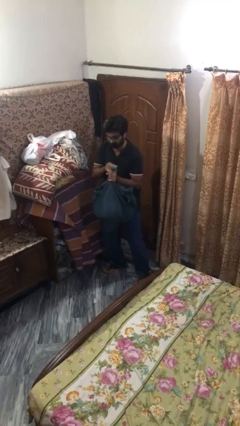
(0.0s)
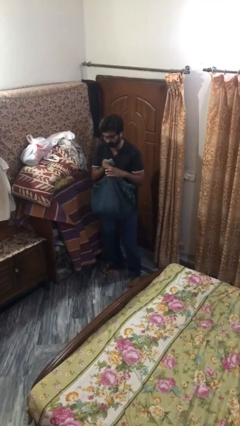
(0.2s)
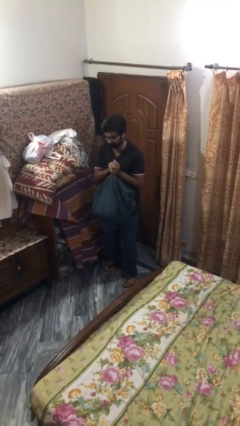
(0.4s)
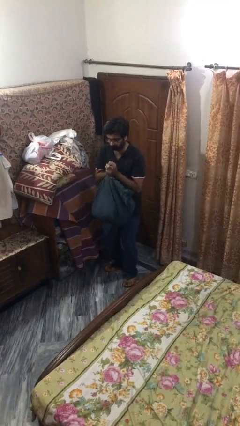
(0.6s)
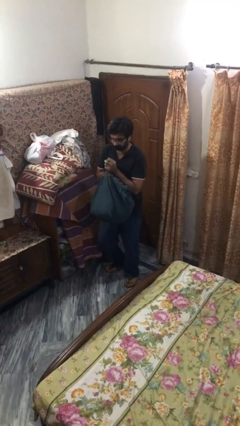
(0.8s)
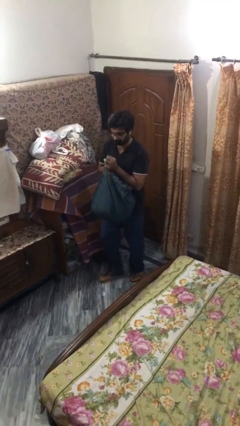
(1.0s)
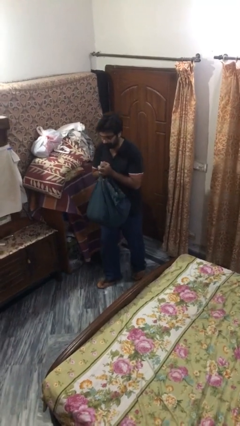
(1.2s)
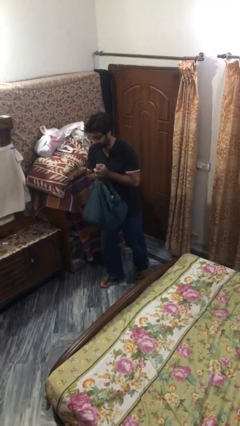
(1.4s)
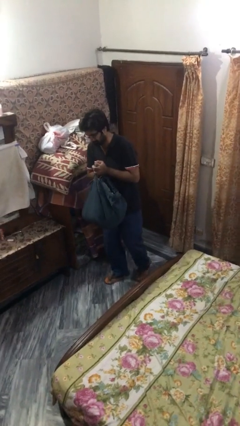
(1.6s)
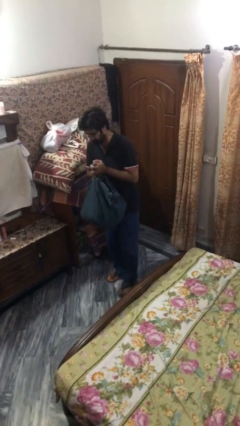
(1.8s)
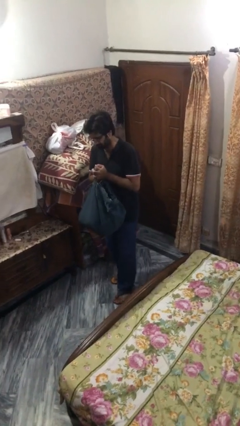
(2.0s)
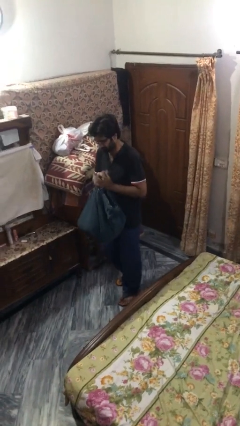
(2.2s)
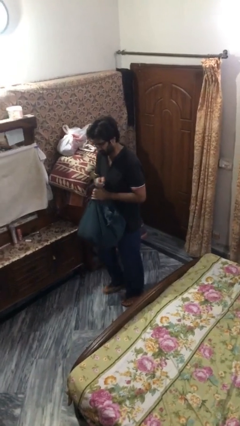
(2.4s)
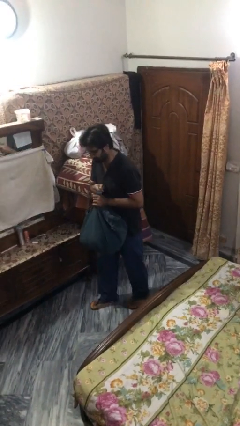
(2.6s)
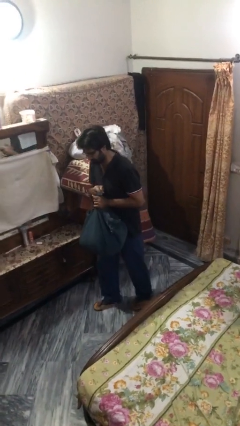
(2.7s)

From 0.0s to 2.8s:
person carries heavy object

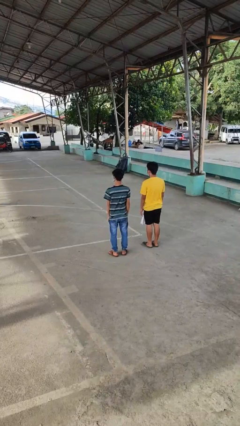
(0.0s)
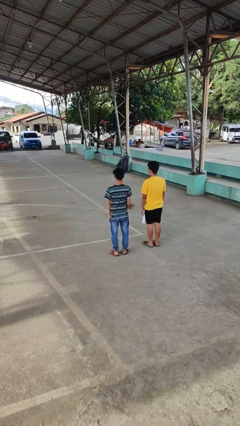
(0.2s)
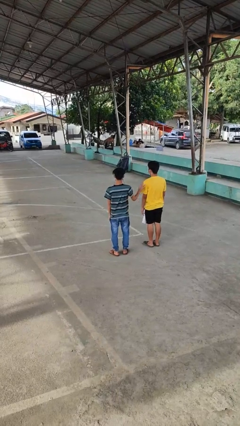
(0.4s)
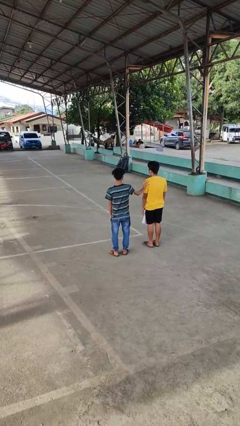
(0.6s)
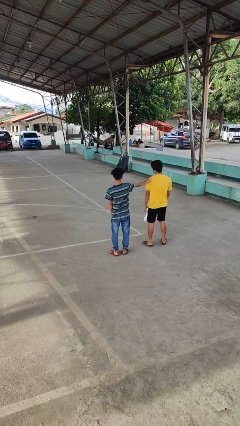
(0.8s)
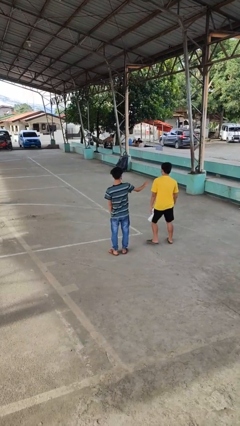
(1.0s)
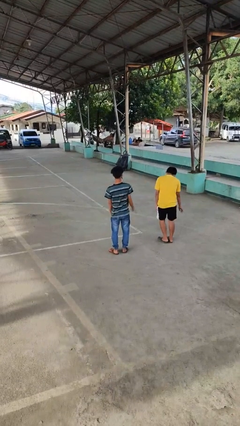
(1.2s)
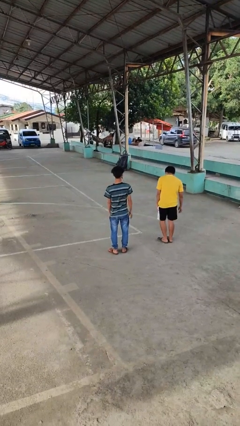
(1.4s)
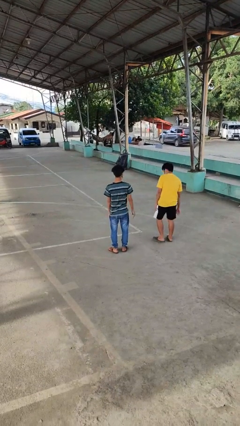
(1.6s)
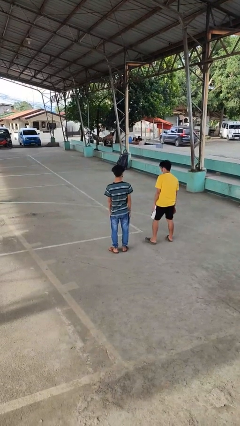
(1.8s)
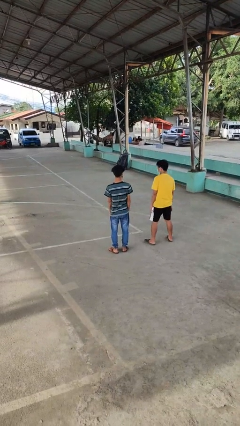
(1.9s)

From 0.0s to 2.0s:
person shoves person

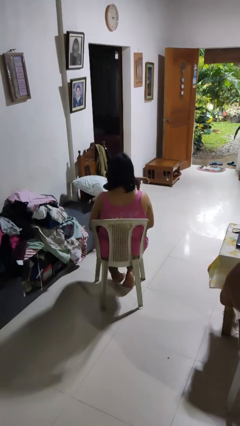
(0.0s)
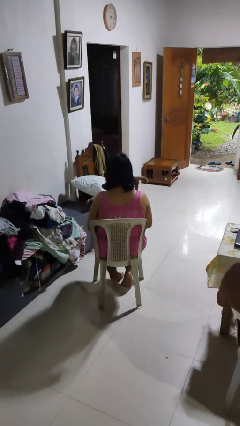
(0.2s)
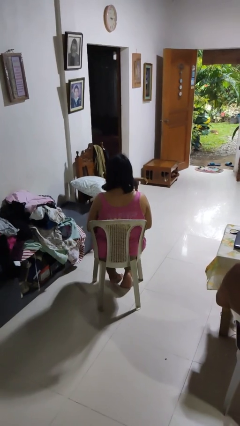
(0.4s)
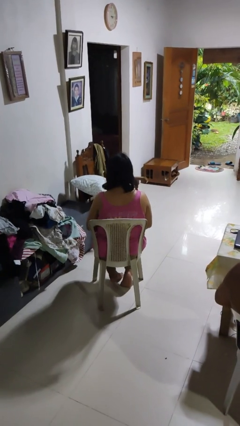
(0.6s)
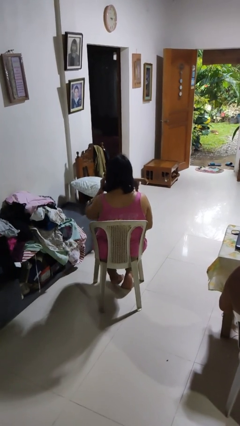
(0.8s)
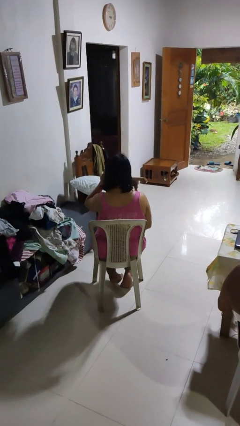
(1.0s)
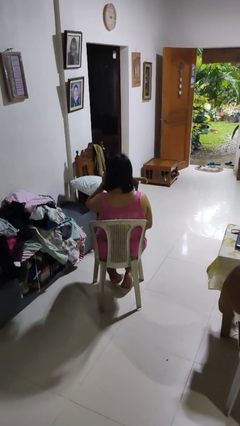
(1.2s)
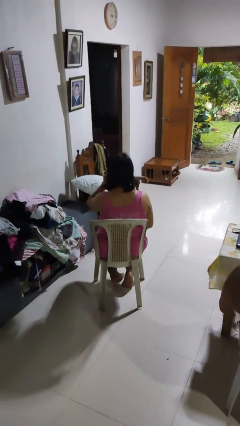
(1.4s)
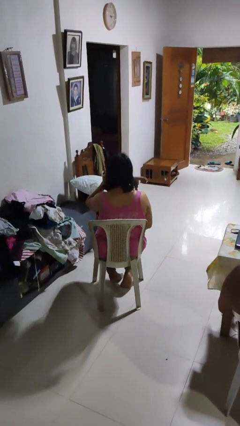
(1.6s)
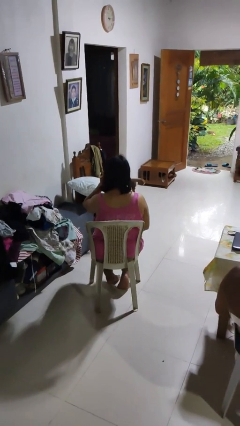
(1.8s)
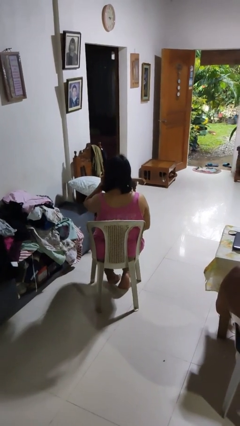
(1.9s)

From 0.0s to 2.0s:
person touches earlobe

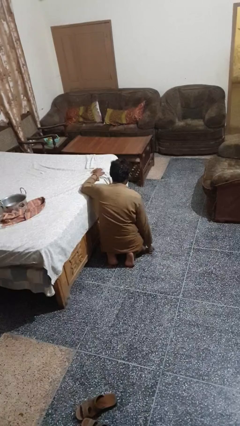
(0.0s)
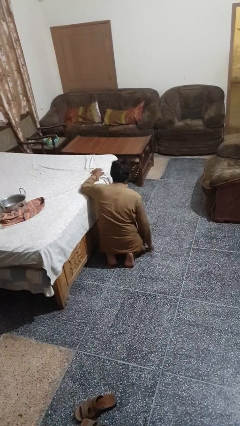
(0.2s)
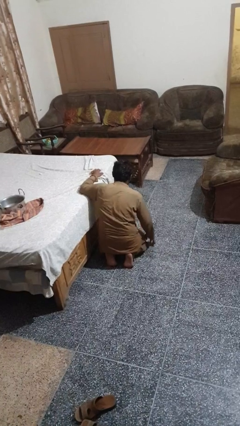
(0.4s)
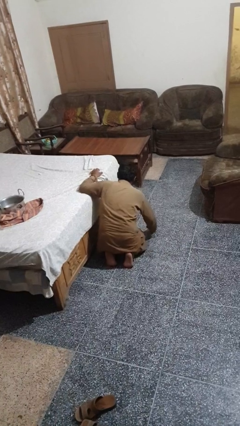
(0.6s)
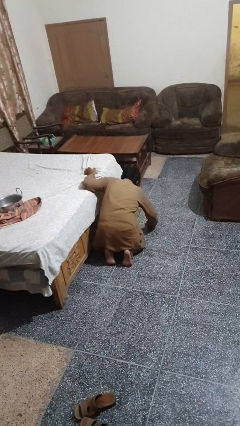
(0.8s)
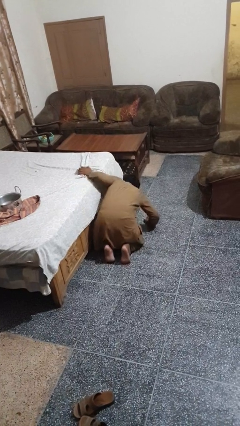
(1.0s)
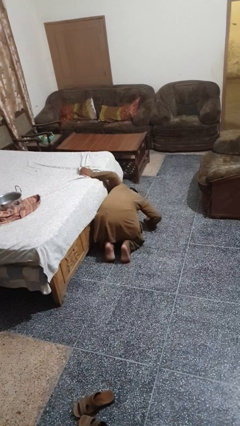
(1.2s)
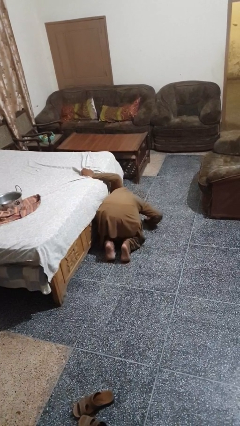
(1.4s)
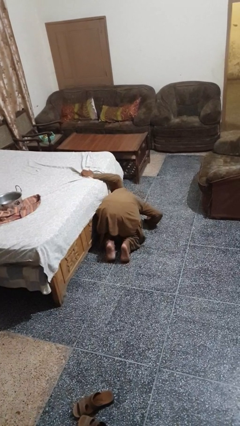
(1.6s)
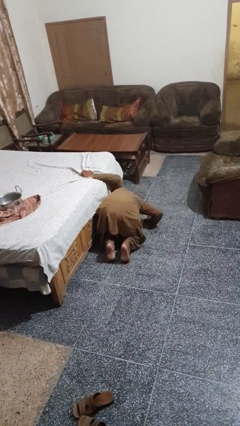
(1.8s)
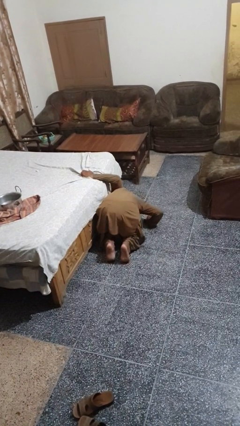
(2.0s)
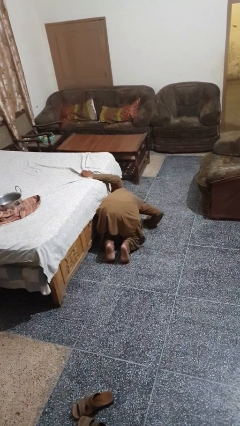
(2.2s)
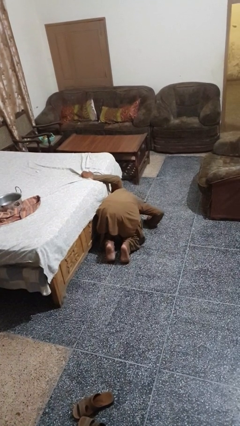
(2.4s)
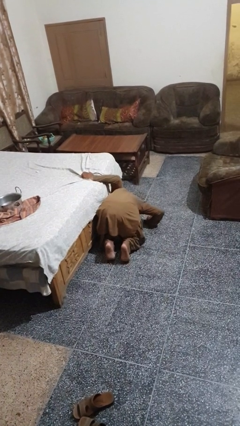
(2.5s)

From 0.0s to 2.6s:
person searches under bed

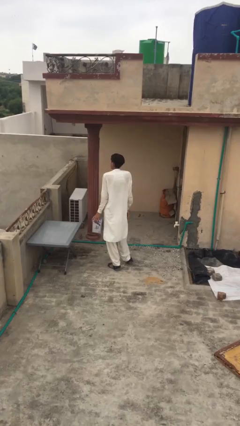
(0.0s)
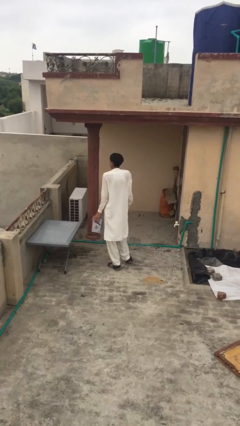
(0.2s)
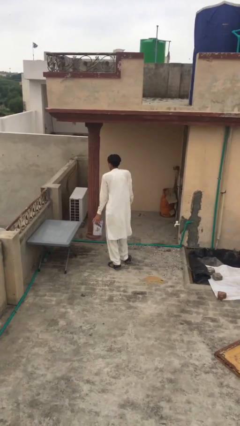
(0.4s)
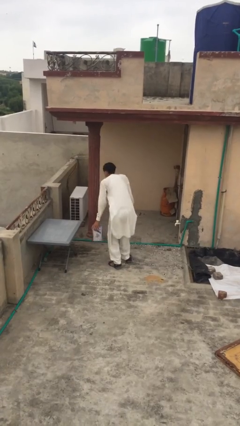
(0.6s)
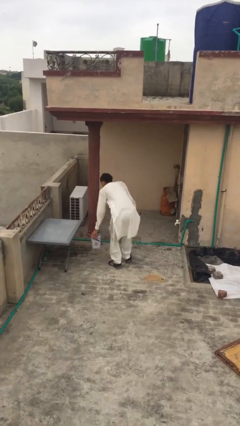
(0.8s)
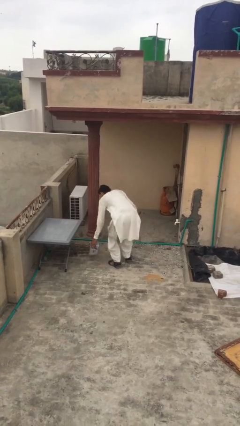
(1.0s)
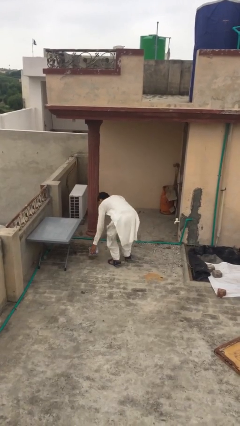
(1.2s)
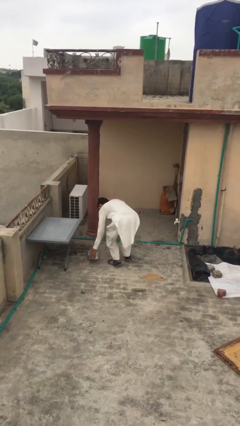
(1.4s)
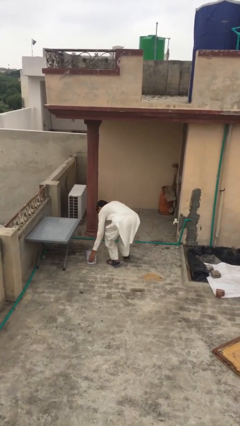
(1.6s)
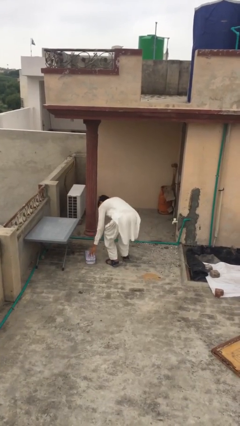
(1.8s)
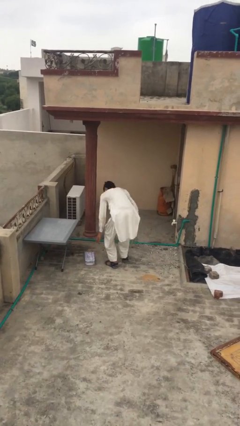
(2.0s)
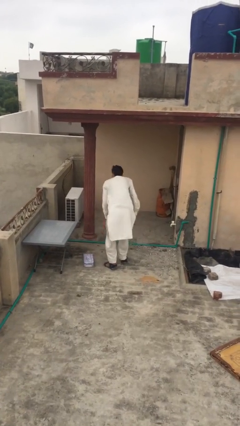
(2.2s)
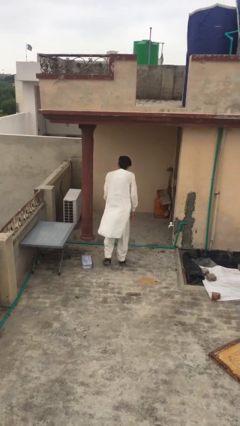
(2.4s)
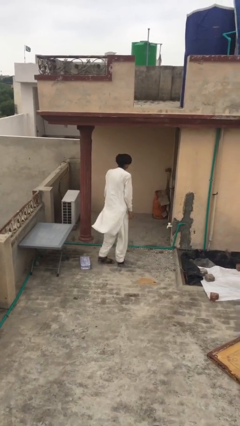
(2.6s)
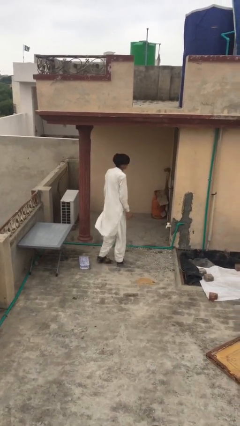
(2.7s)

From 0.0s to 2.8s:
person puts down object on floor

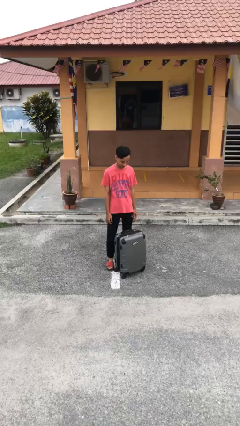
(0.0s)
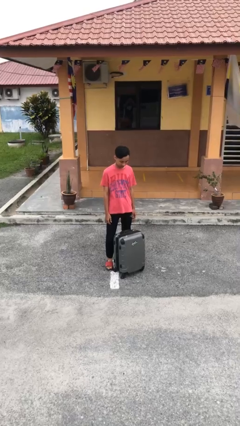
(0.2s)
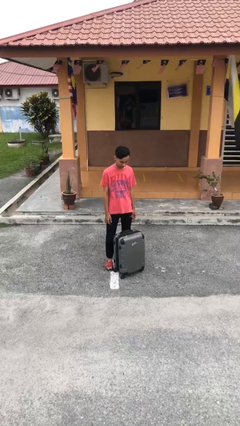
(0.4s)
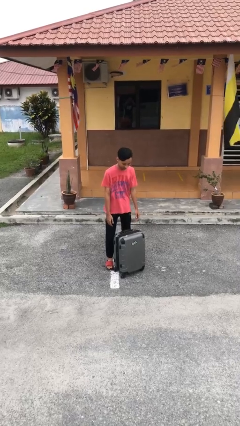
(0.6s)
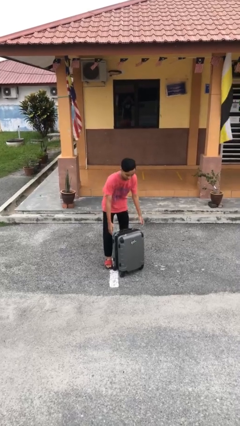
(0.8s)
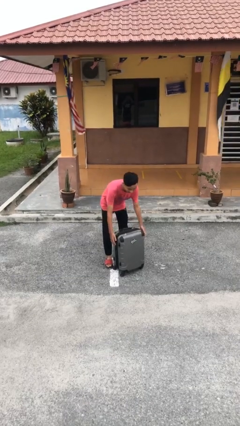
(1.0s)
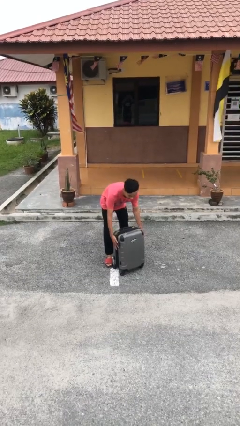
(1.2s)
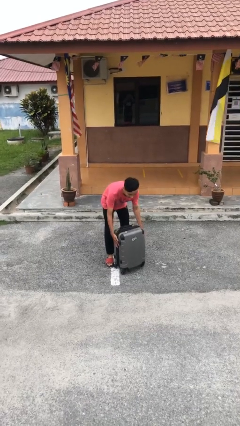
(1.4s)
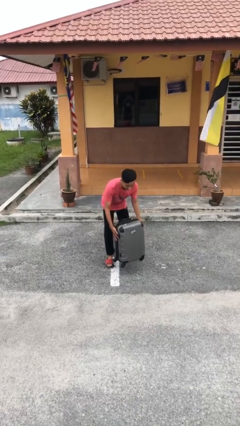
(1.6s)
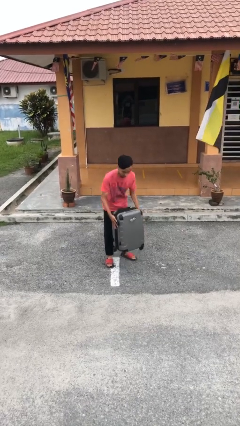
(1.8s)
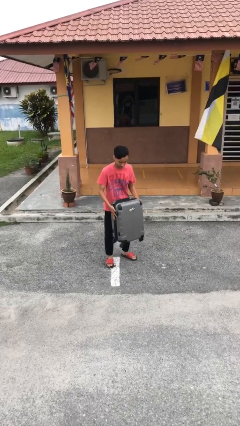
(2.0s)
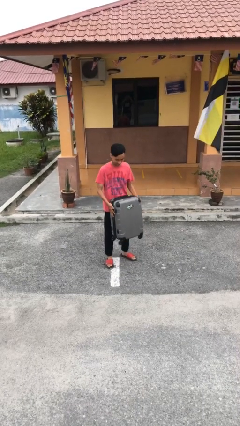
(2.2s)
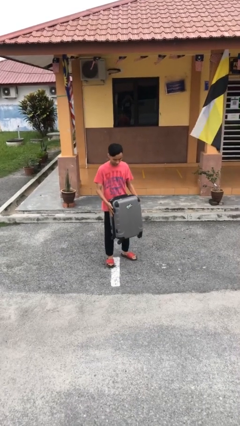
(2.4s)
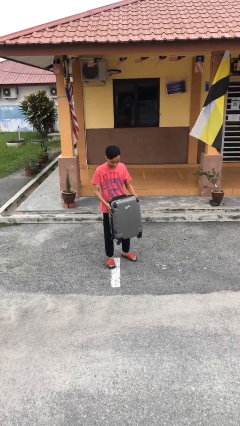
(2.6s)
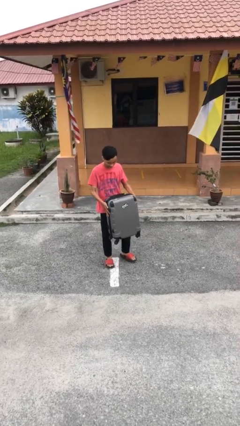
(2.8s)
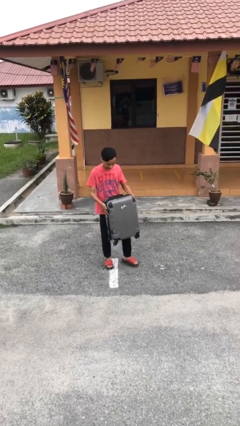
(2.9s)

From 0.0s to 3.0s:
person picks up object from floor

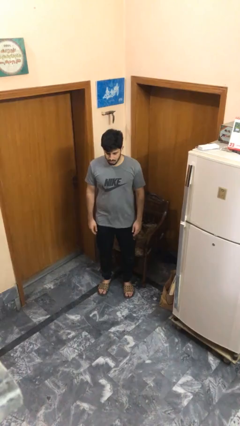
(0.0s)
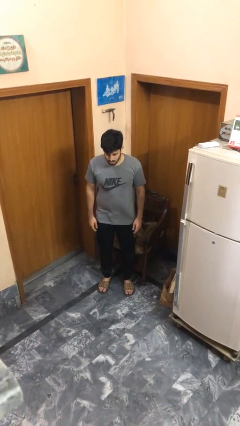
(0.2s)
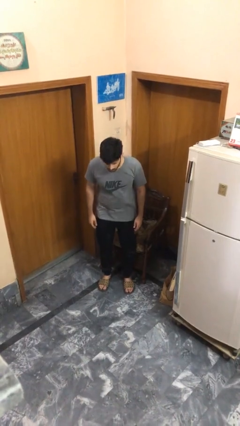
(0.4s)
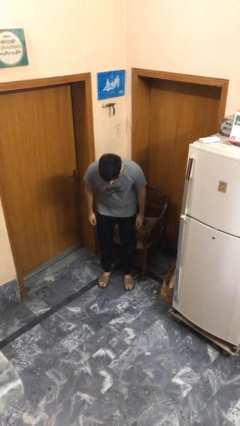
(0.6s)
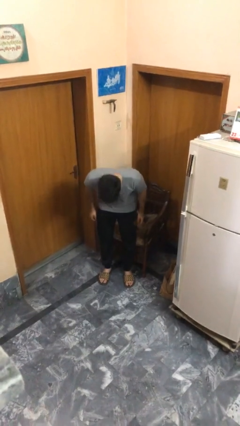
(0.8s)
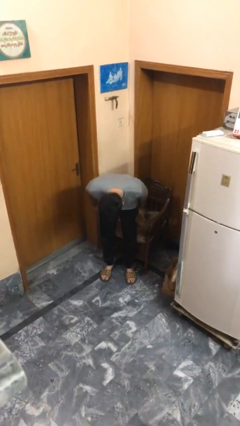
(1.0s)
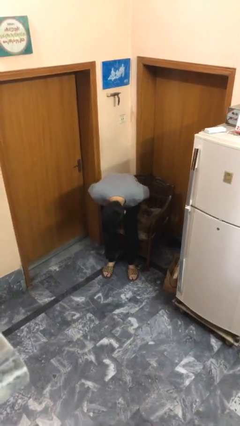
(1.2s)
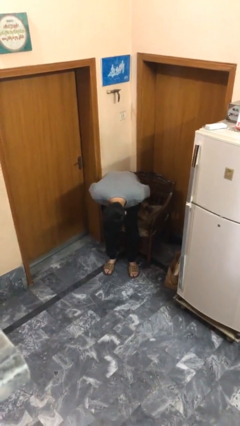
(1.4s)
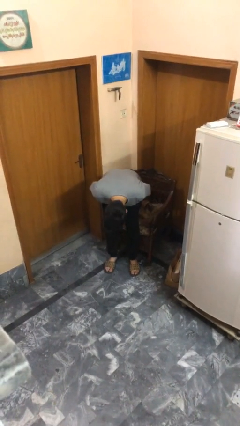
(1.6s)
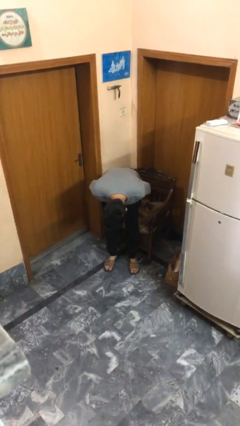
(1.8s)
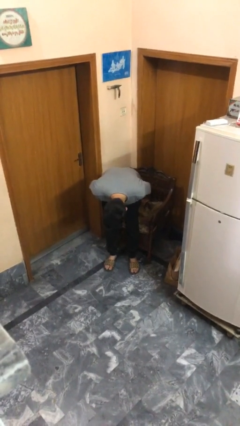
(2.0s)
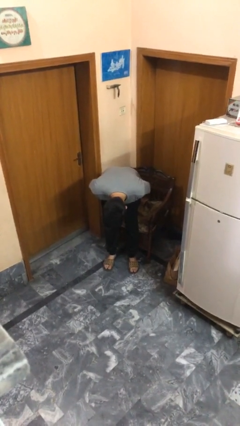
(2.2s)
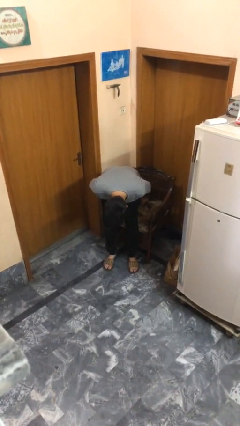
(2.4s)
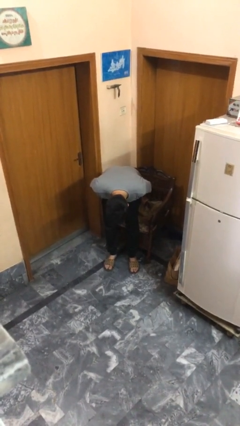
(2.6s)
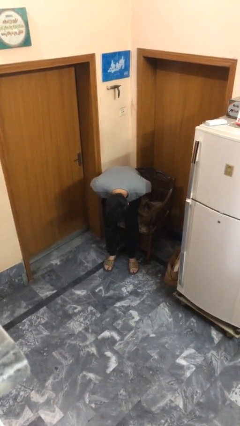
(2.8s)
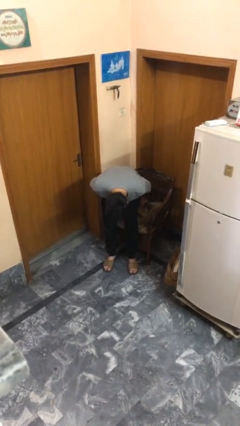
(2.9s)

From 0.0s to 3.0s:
person bows
